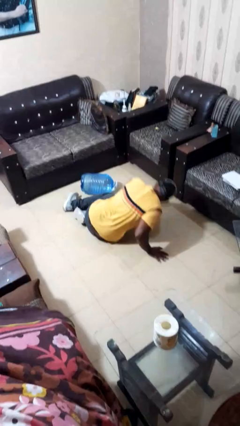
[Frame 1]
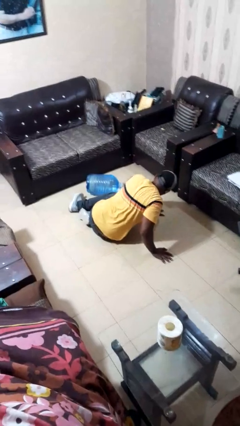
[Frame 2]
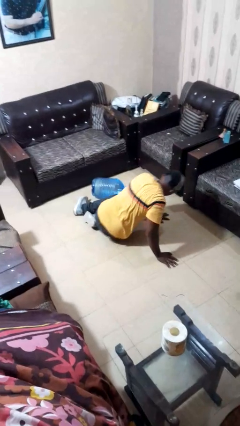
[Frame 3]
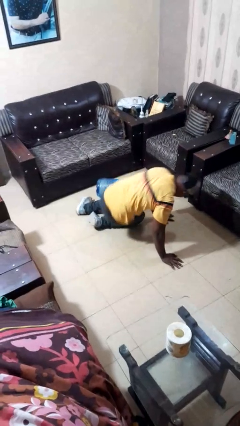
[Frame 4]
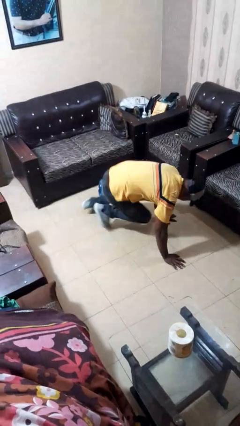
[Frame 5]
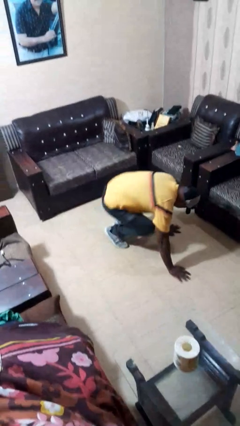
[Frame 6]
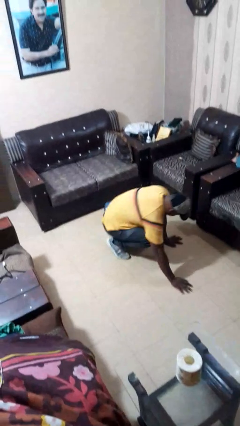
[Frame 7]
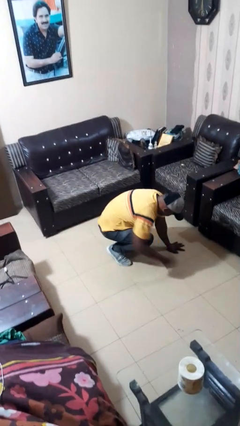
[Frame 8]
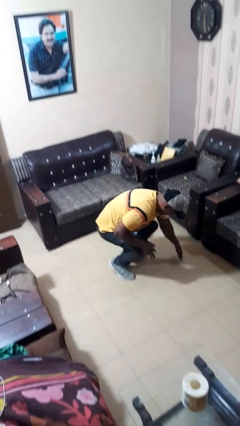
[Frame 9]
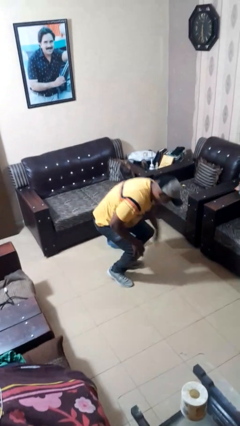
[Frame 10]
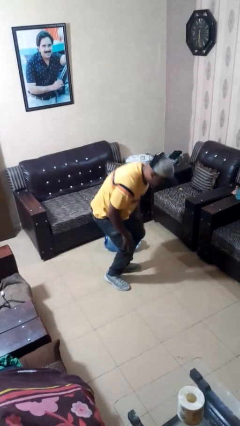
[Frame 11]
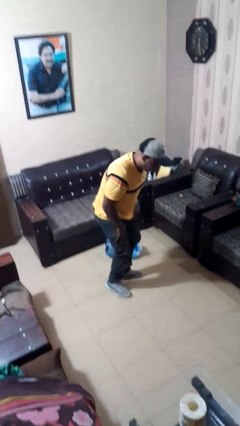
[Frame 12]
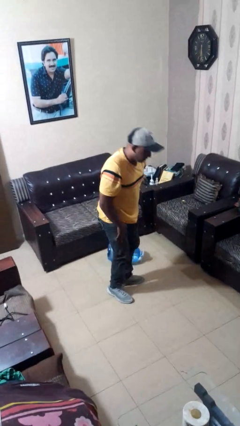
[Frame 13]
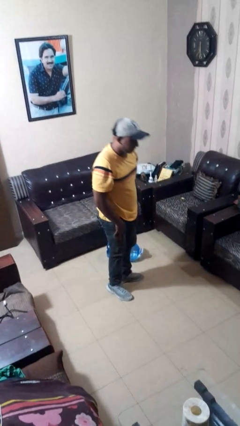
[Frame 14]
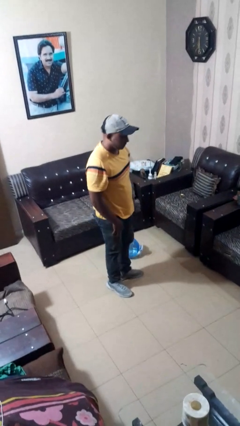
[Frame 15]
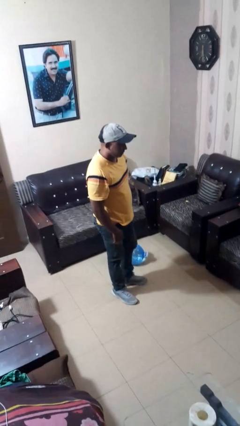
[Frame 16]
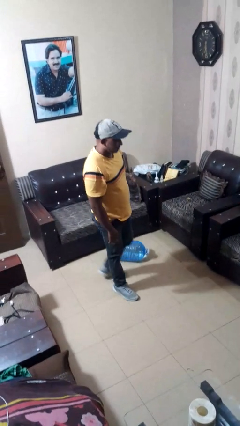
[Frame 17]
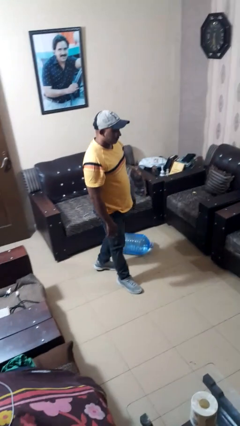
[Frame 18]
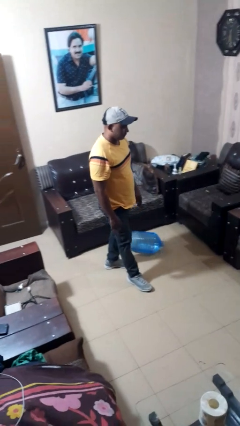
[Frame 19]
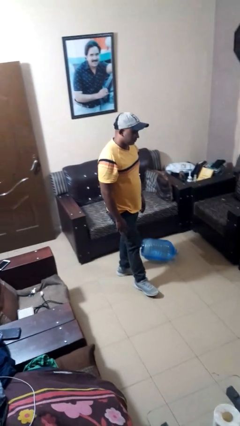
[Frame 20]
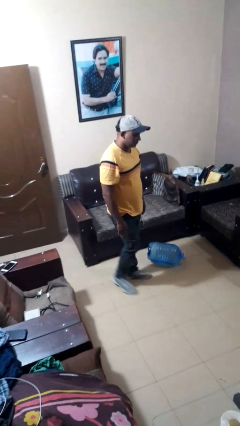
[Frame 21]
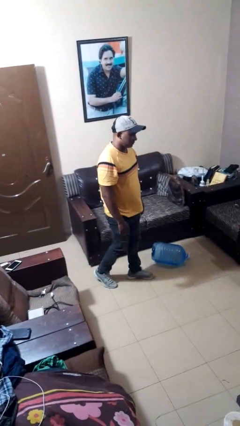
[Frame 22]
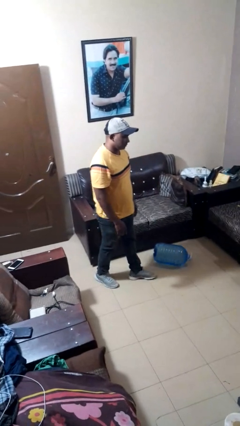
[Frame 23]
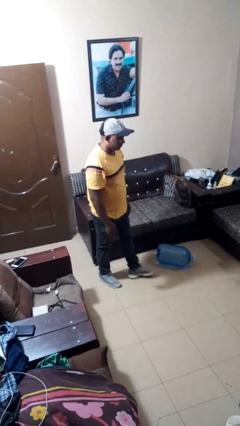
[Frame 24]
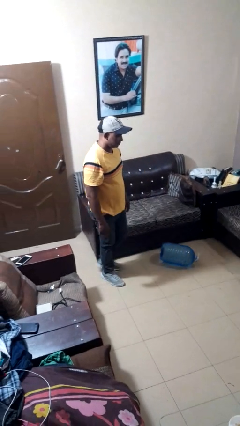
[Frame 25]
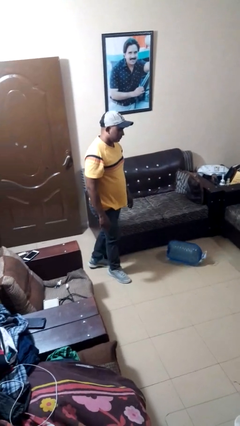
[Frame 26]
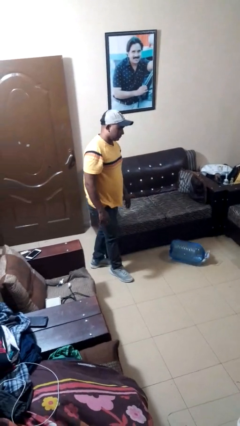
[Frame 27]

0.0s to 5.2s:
person stands up from floor

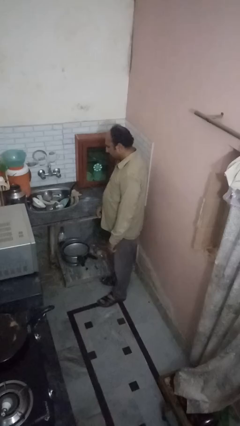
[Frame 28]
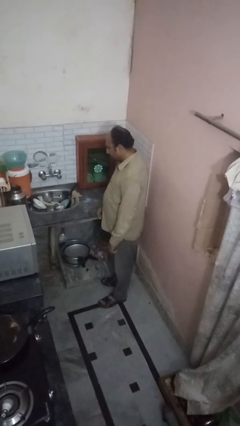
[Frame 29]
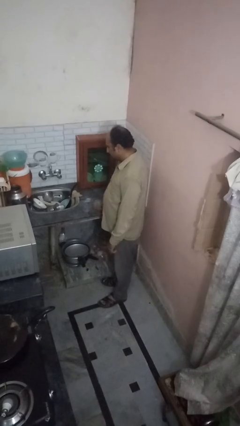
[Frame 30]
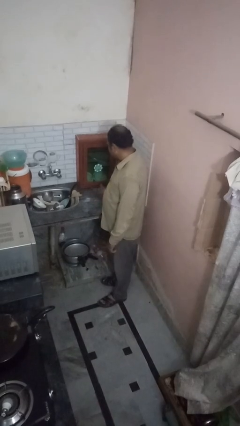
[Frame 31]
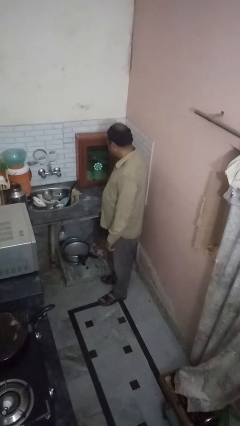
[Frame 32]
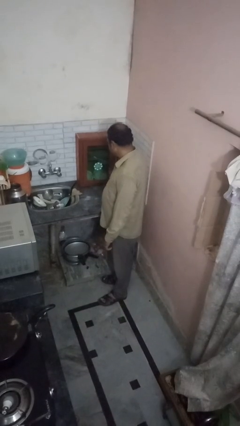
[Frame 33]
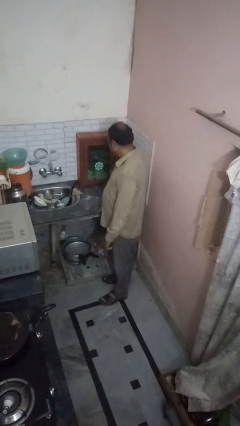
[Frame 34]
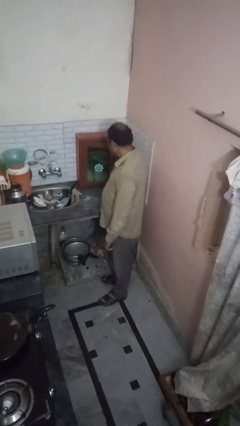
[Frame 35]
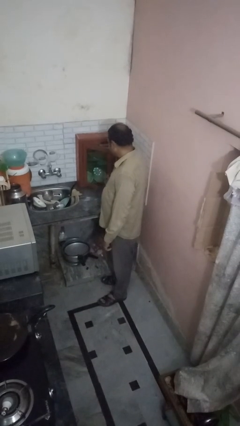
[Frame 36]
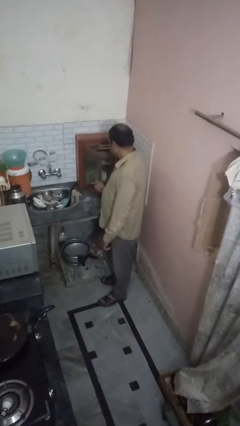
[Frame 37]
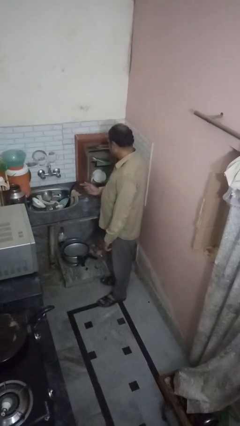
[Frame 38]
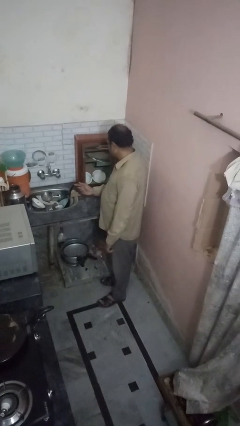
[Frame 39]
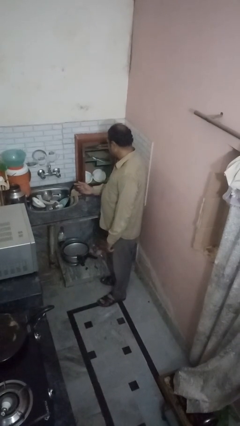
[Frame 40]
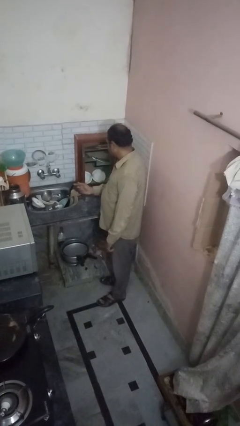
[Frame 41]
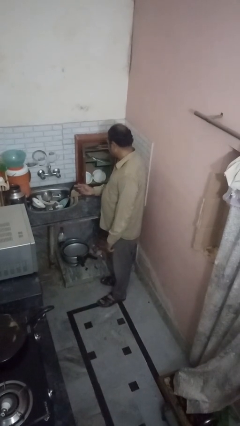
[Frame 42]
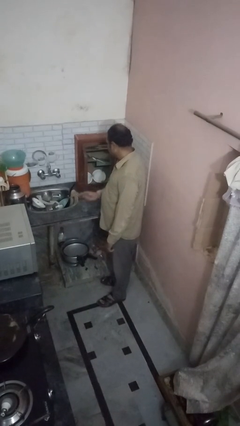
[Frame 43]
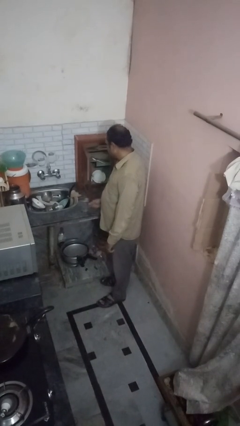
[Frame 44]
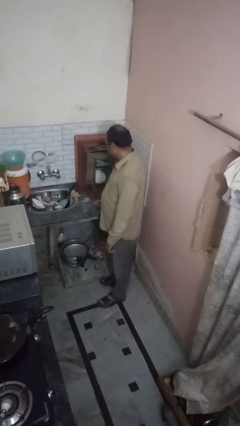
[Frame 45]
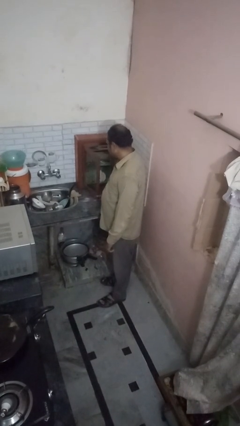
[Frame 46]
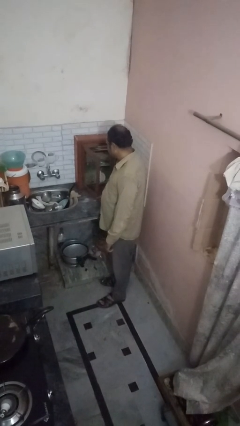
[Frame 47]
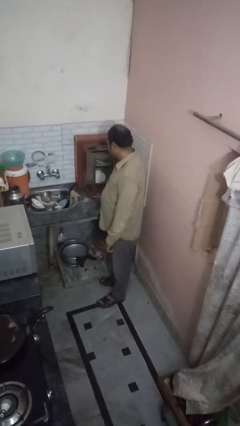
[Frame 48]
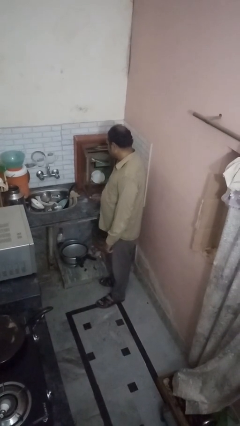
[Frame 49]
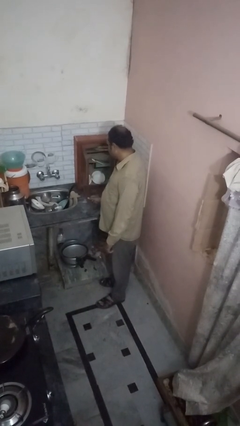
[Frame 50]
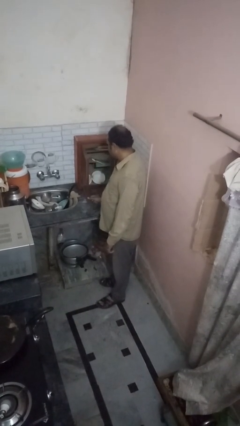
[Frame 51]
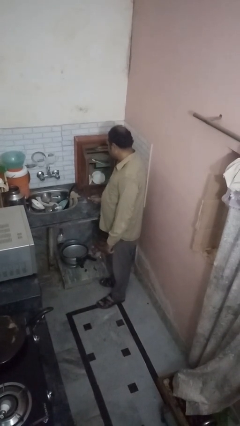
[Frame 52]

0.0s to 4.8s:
person opens cabinet

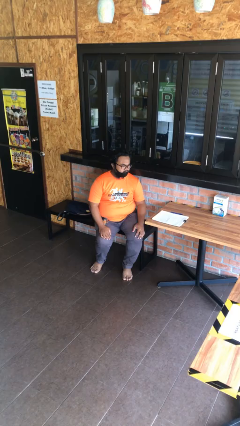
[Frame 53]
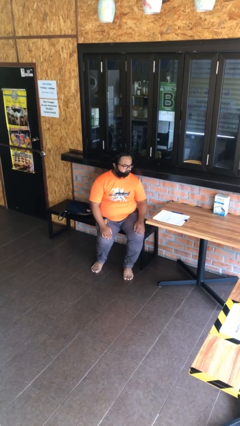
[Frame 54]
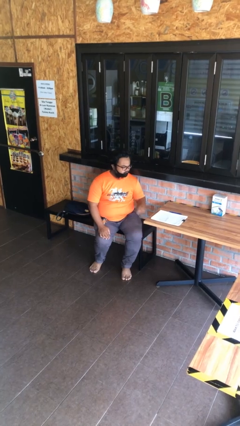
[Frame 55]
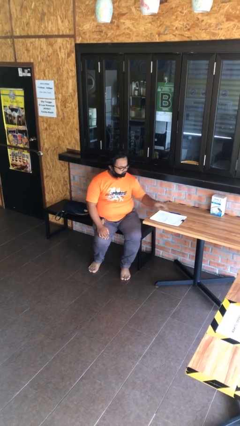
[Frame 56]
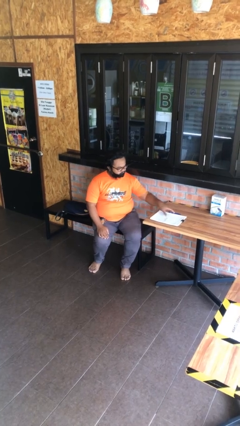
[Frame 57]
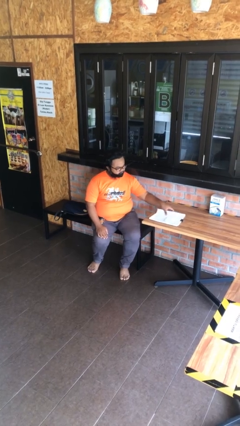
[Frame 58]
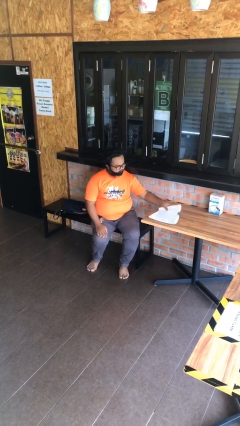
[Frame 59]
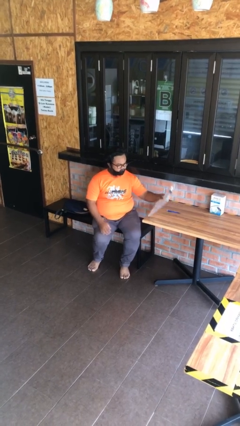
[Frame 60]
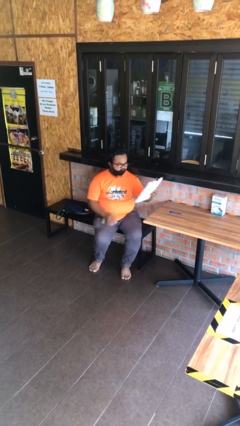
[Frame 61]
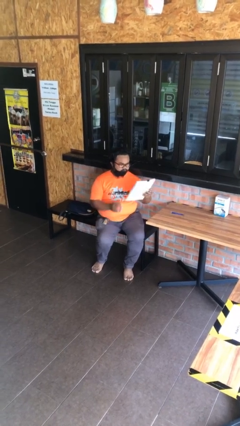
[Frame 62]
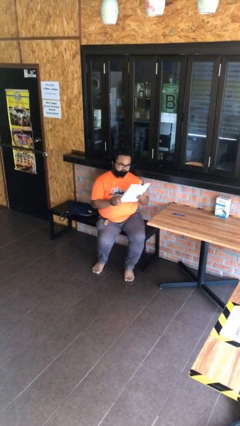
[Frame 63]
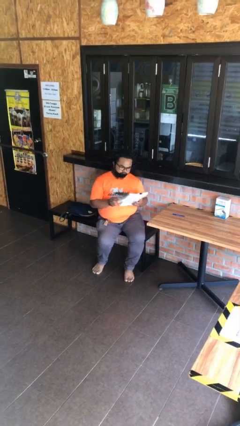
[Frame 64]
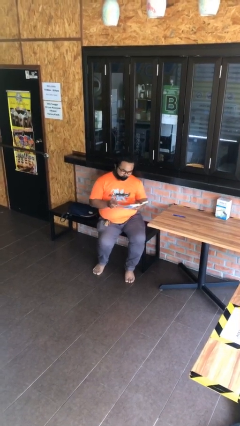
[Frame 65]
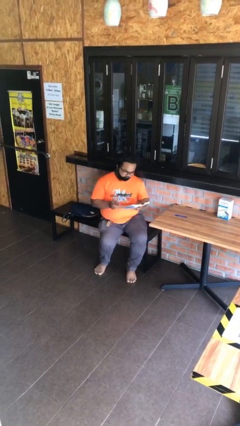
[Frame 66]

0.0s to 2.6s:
person picks up object from table

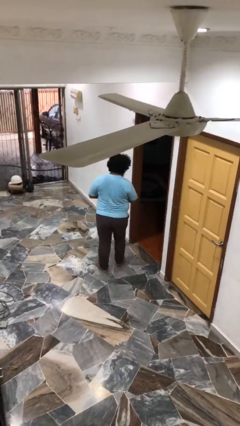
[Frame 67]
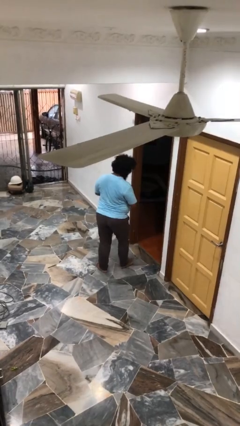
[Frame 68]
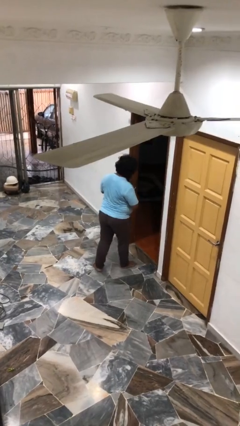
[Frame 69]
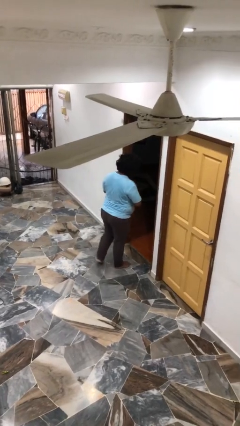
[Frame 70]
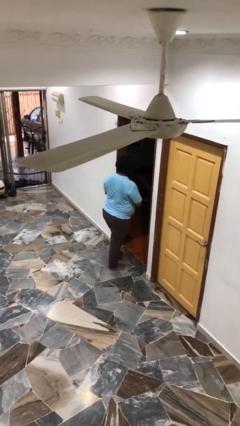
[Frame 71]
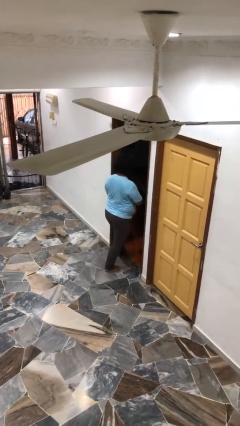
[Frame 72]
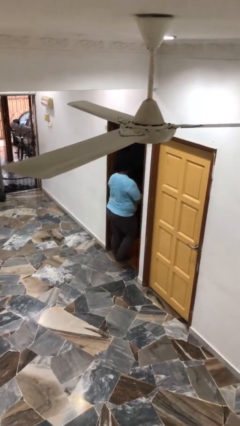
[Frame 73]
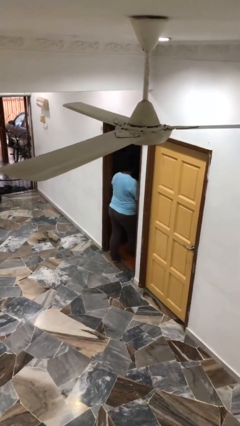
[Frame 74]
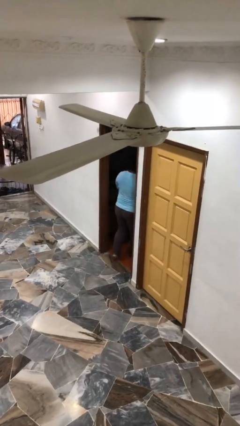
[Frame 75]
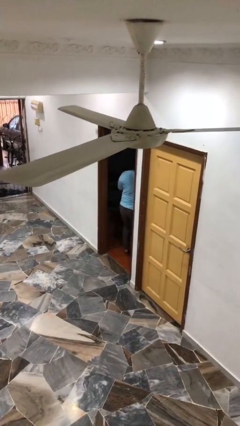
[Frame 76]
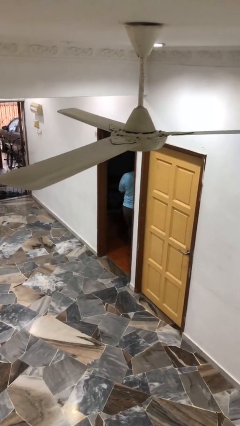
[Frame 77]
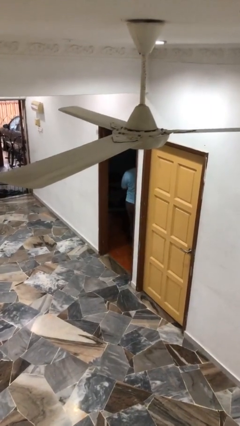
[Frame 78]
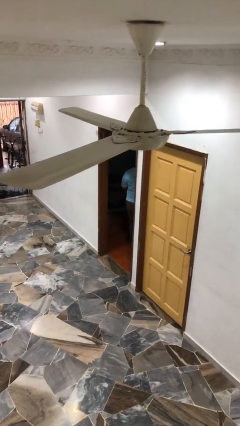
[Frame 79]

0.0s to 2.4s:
person exits scene through structure

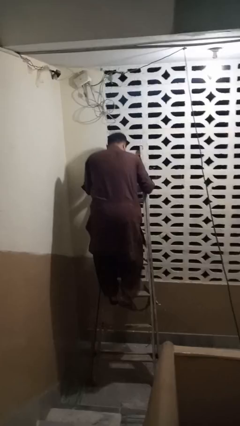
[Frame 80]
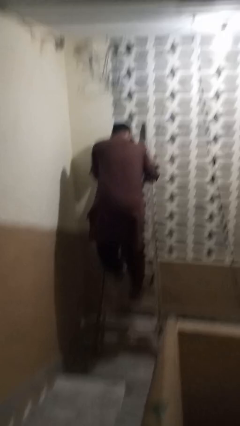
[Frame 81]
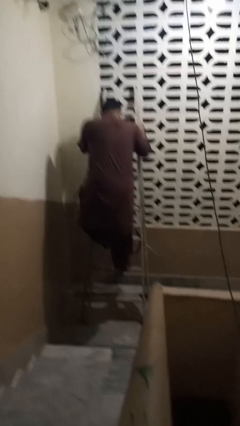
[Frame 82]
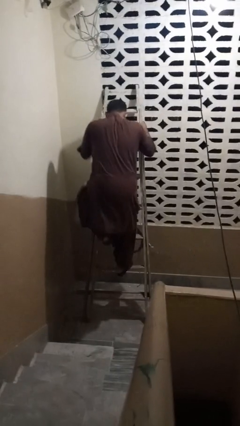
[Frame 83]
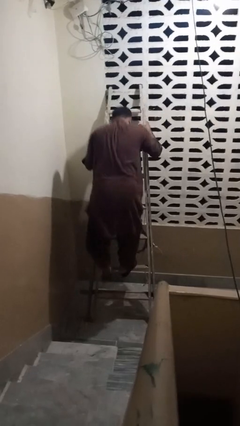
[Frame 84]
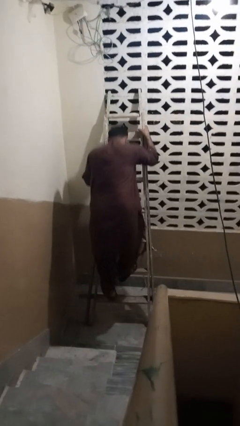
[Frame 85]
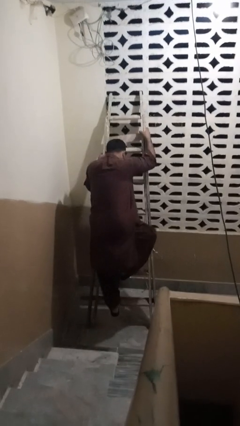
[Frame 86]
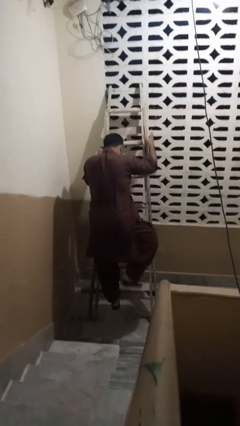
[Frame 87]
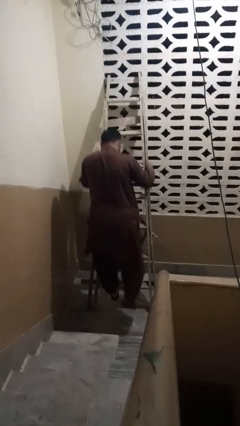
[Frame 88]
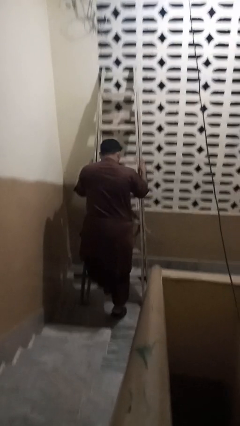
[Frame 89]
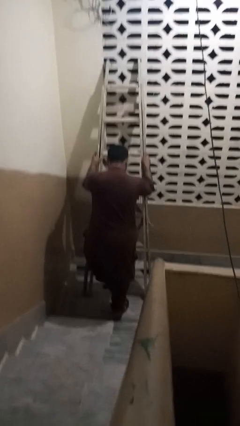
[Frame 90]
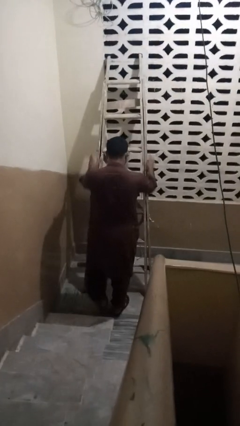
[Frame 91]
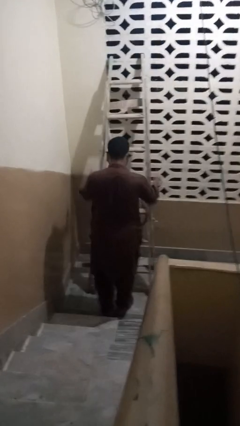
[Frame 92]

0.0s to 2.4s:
person climbs down ladder
